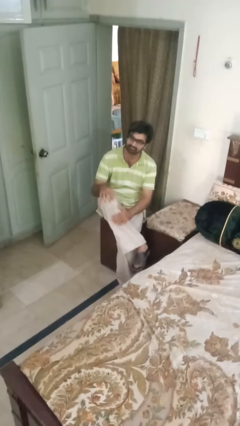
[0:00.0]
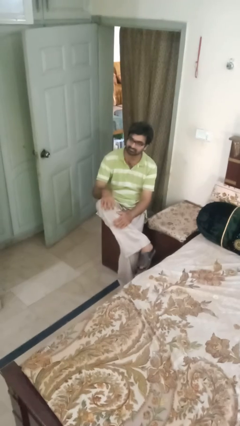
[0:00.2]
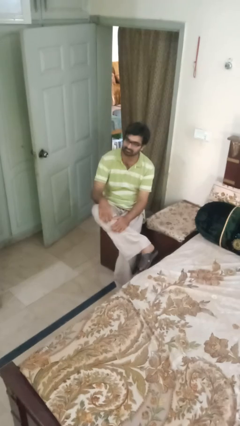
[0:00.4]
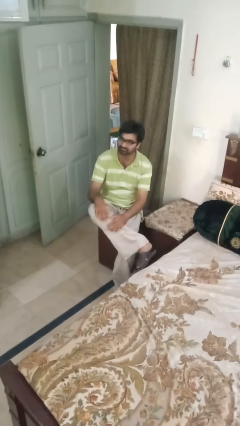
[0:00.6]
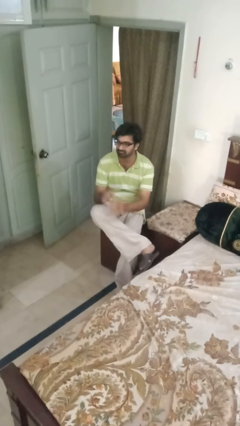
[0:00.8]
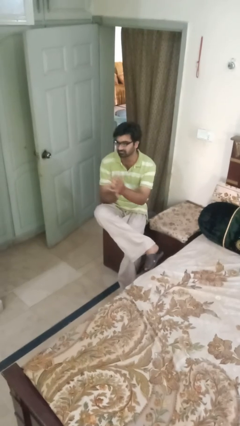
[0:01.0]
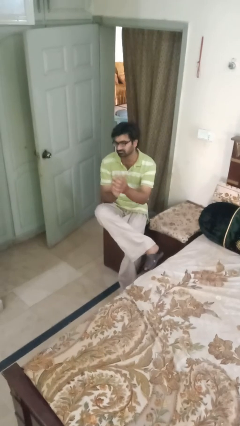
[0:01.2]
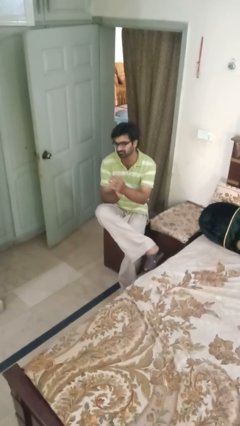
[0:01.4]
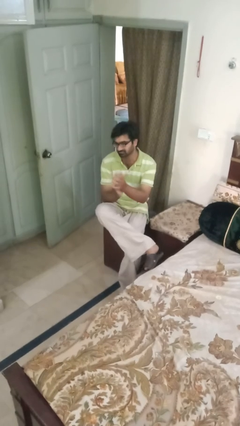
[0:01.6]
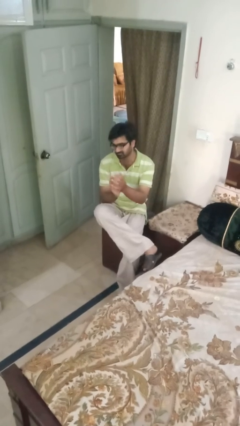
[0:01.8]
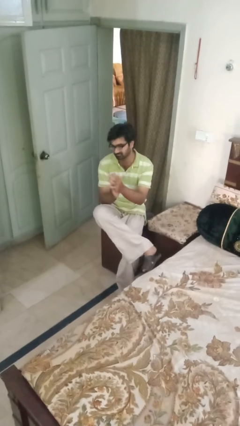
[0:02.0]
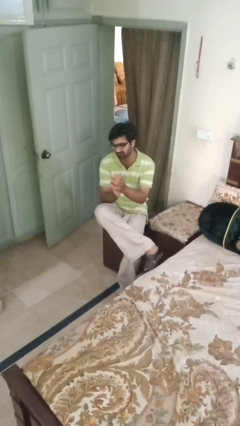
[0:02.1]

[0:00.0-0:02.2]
person claps hands

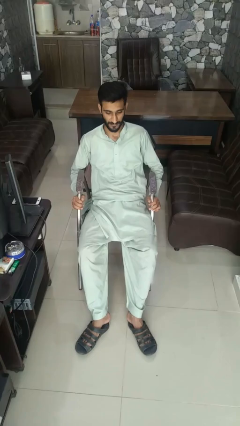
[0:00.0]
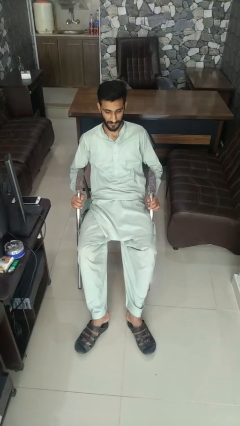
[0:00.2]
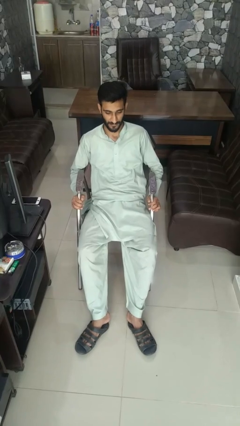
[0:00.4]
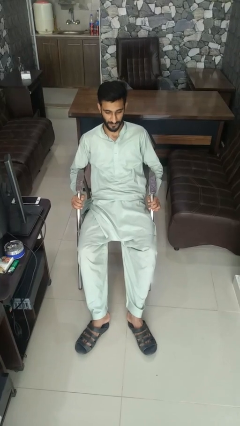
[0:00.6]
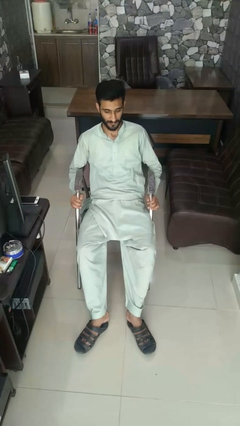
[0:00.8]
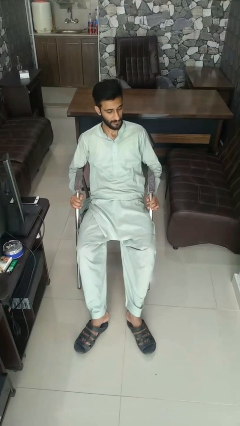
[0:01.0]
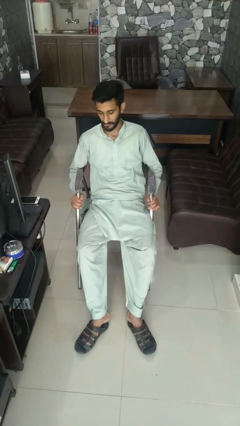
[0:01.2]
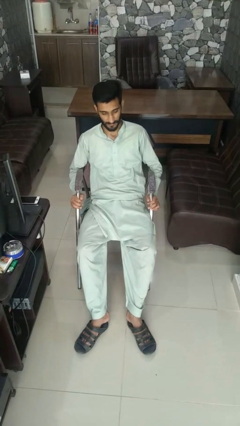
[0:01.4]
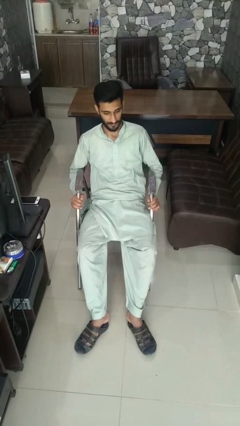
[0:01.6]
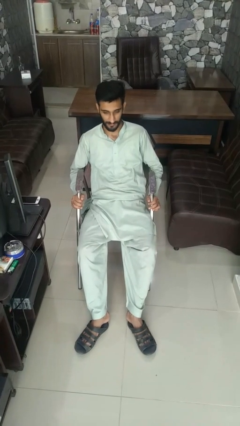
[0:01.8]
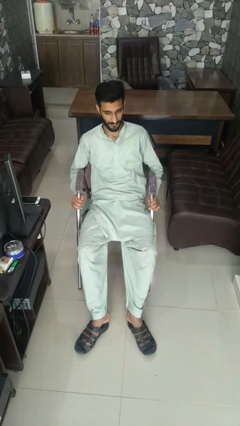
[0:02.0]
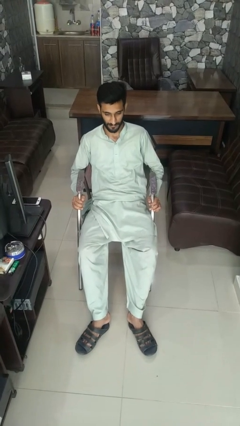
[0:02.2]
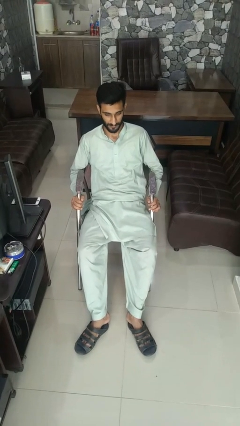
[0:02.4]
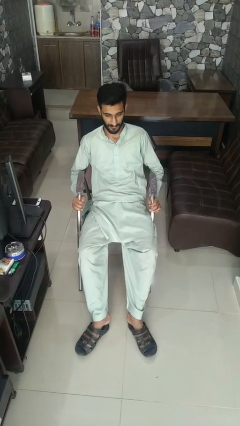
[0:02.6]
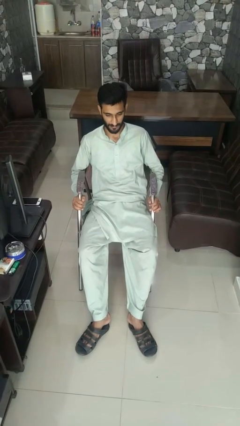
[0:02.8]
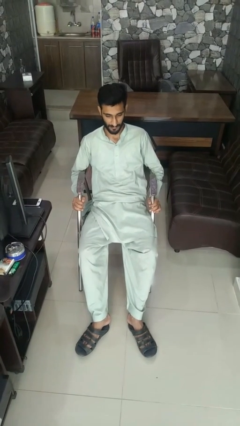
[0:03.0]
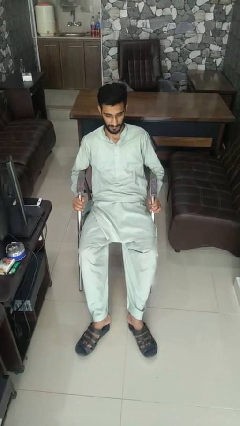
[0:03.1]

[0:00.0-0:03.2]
person shakes head

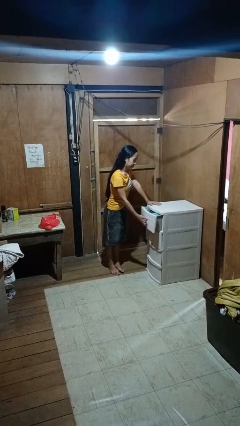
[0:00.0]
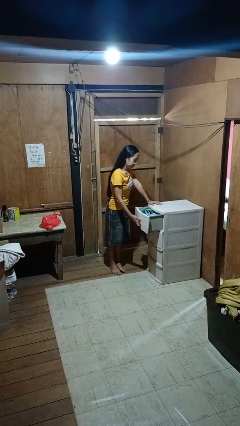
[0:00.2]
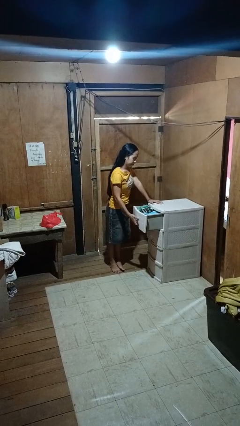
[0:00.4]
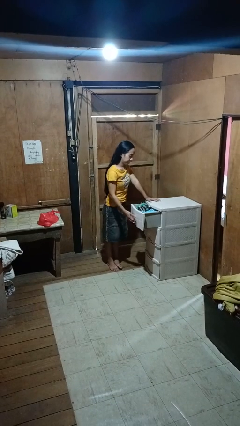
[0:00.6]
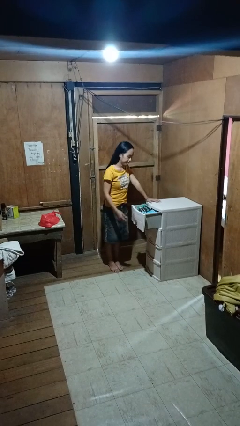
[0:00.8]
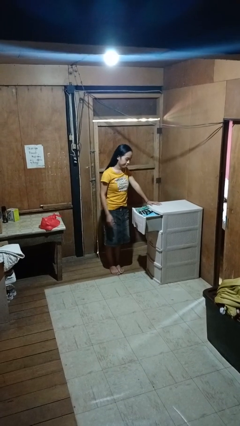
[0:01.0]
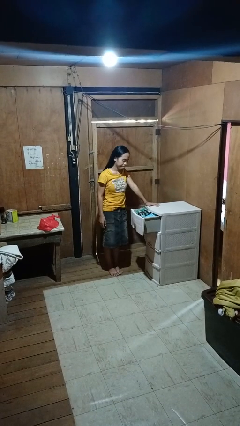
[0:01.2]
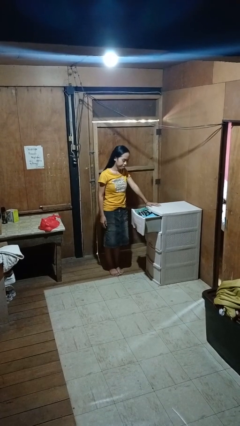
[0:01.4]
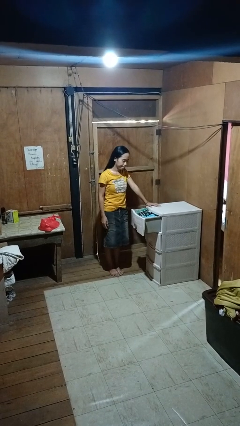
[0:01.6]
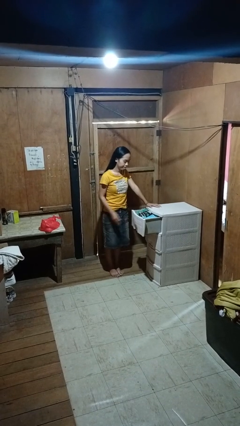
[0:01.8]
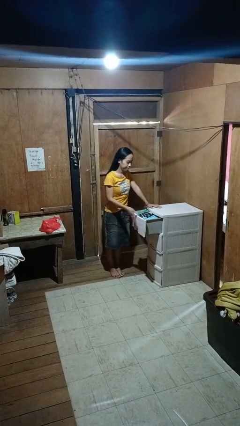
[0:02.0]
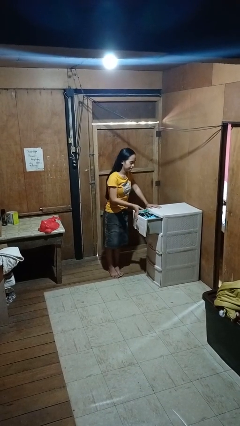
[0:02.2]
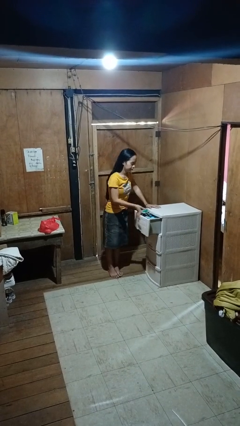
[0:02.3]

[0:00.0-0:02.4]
person opens dresser drawer

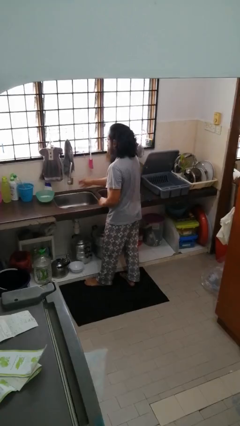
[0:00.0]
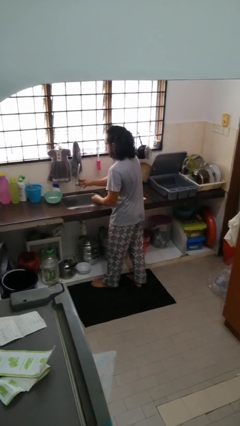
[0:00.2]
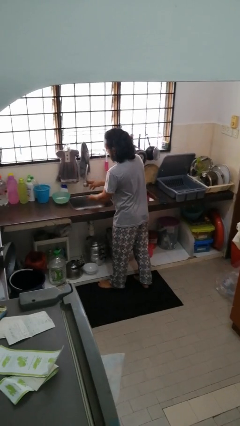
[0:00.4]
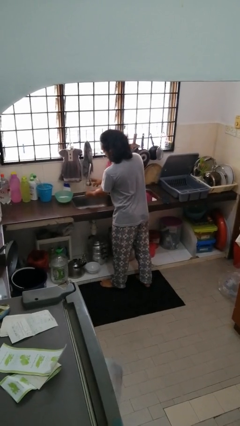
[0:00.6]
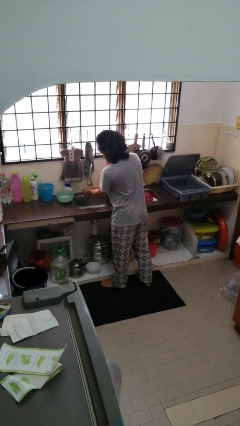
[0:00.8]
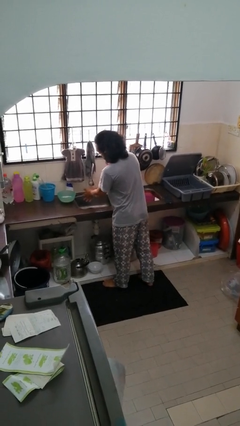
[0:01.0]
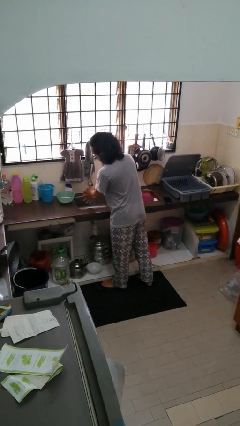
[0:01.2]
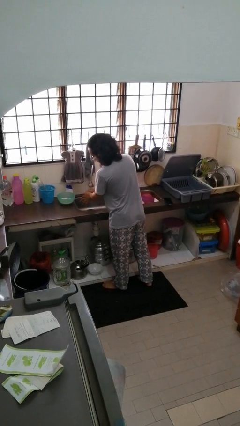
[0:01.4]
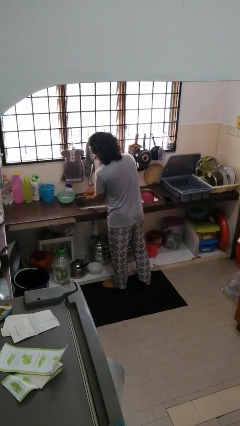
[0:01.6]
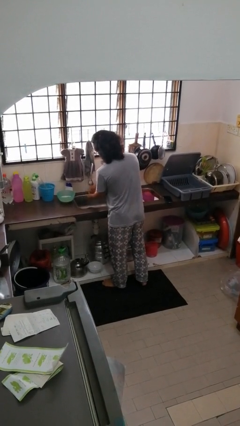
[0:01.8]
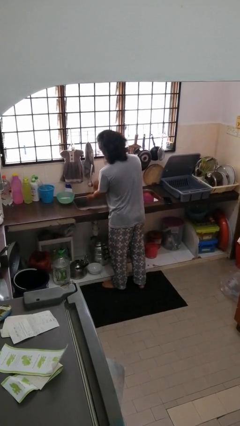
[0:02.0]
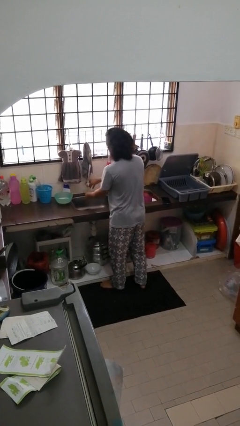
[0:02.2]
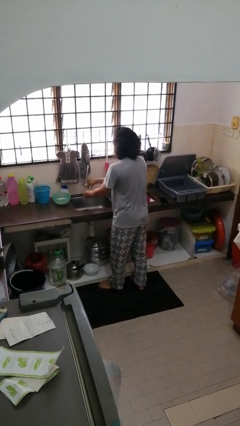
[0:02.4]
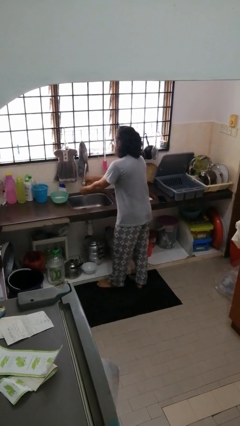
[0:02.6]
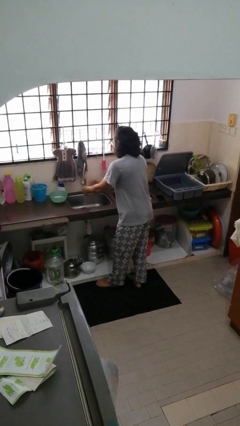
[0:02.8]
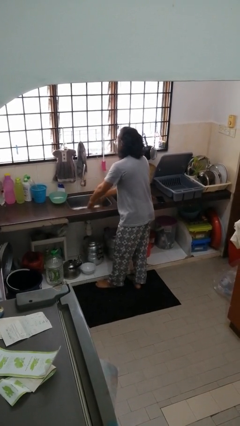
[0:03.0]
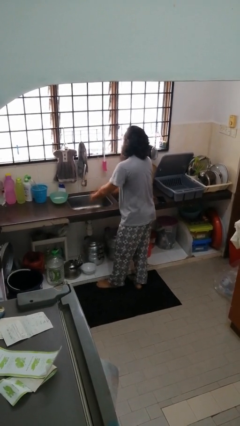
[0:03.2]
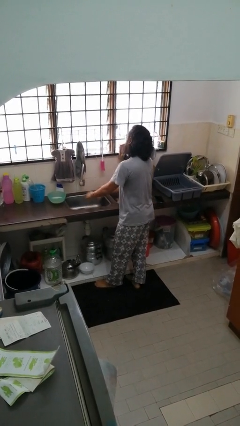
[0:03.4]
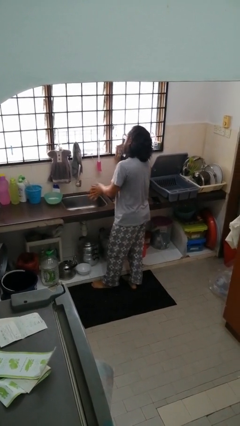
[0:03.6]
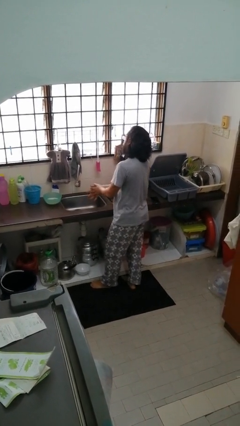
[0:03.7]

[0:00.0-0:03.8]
person washes hands

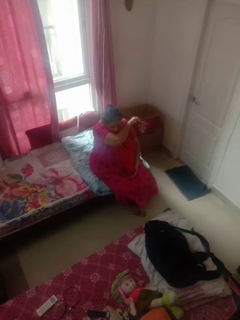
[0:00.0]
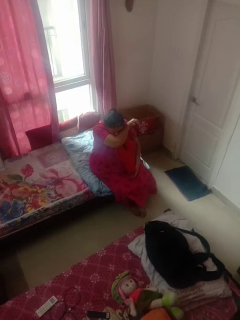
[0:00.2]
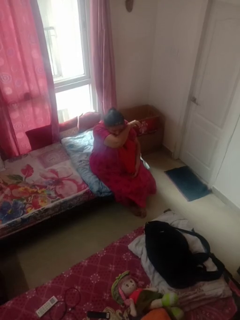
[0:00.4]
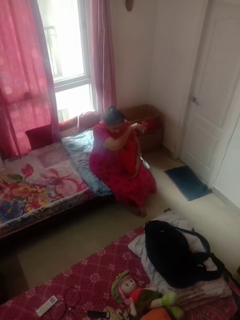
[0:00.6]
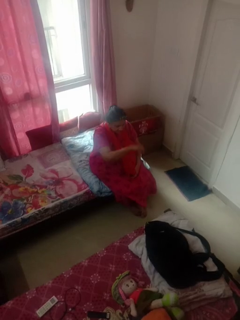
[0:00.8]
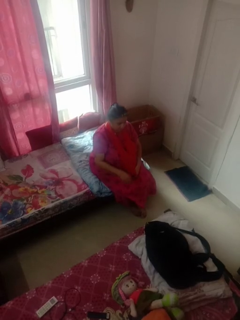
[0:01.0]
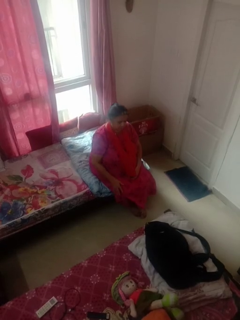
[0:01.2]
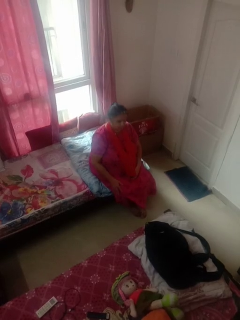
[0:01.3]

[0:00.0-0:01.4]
person sneezes into arm

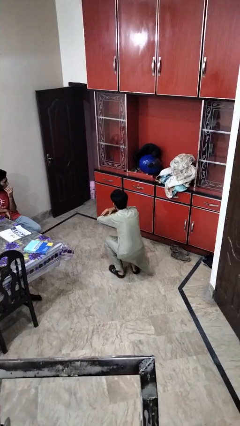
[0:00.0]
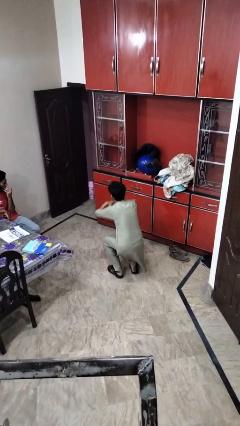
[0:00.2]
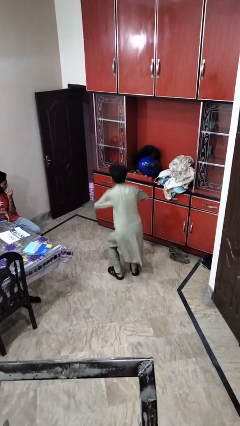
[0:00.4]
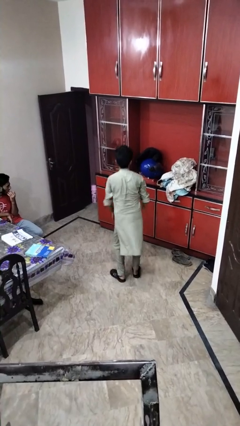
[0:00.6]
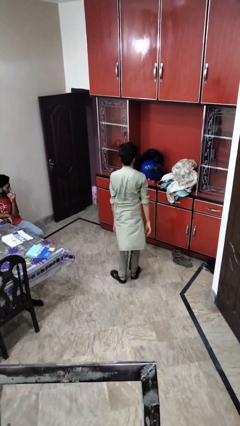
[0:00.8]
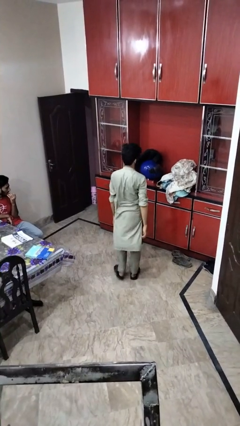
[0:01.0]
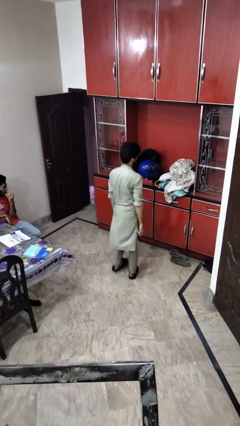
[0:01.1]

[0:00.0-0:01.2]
person stands up

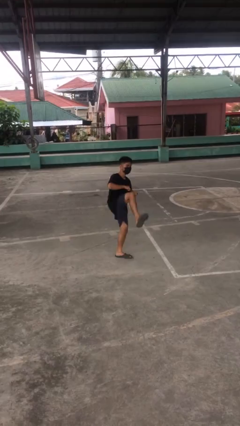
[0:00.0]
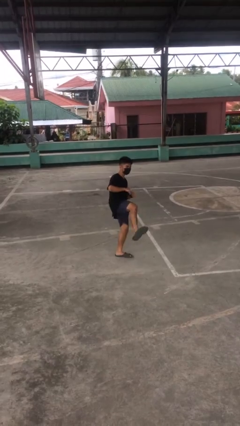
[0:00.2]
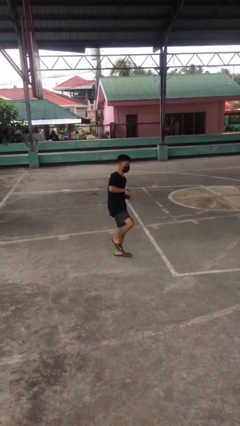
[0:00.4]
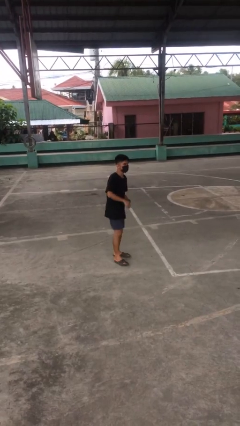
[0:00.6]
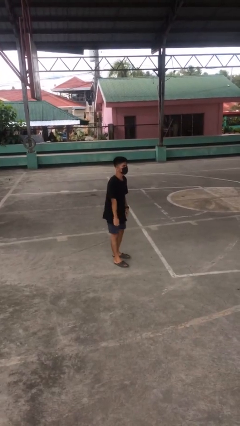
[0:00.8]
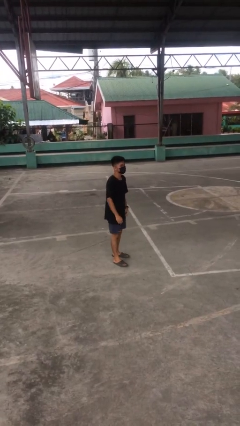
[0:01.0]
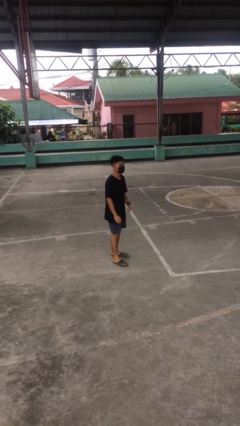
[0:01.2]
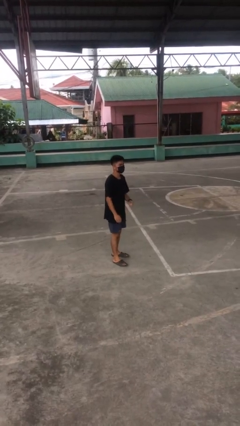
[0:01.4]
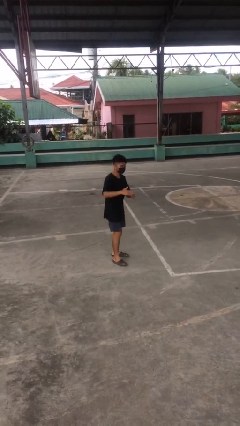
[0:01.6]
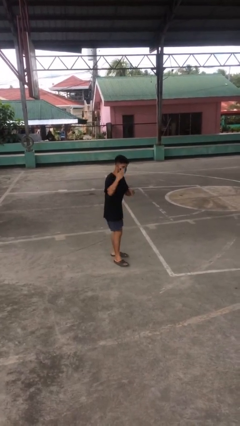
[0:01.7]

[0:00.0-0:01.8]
person karate kicks

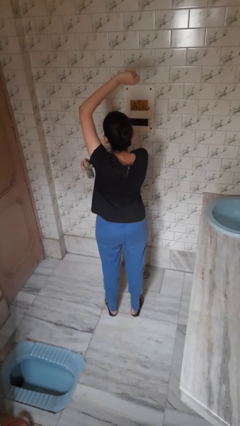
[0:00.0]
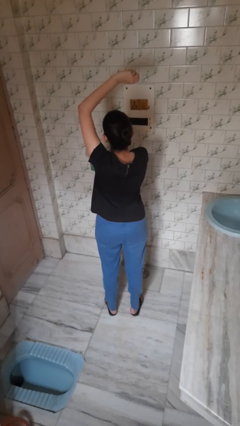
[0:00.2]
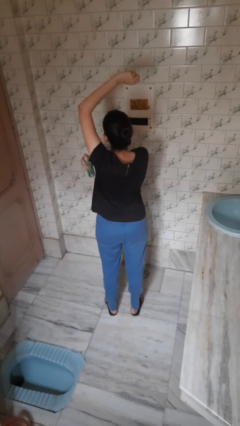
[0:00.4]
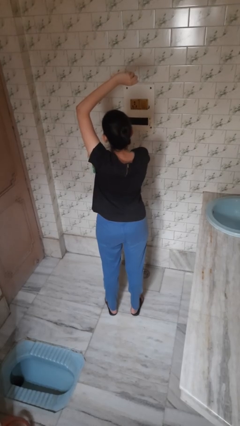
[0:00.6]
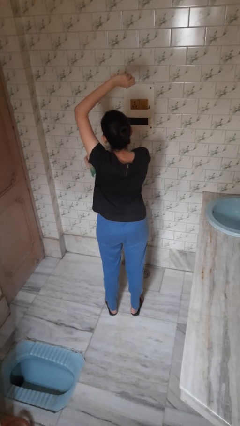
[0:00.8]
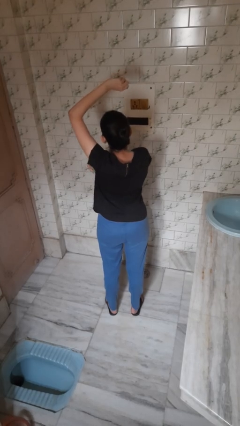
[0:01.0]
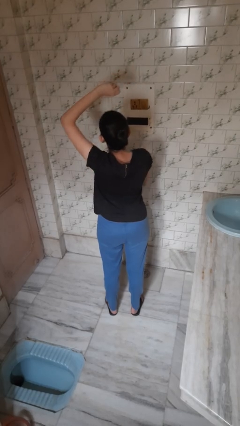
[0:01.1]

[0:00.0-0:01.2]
person applies deodorant

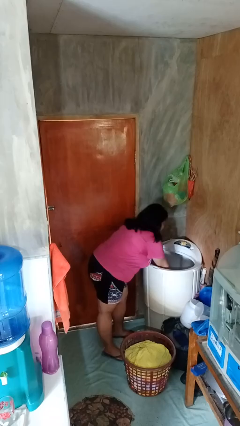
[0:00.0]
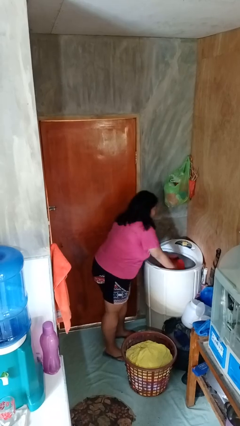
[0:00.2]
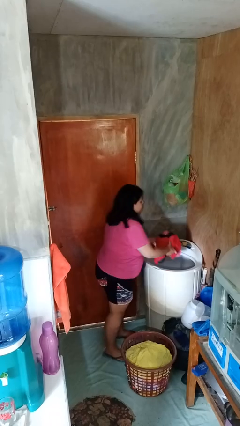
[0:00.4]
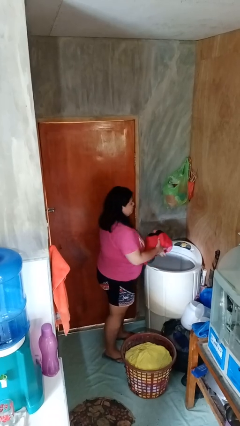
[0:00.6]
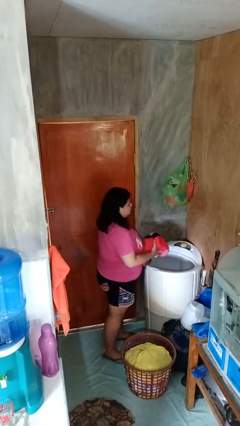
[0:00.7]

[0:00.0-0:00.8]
person unloads clotheswasher
